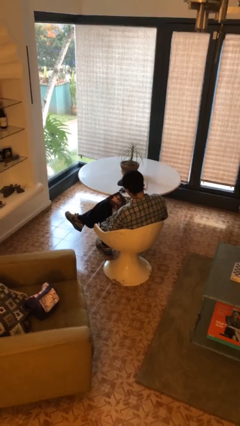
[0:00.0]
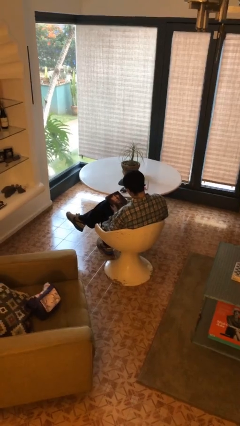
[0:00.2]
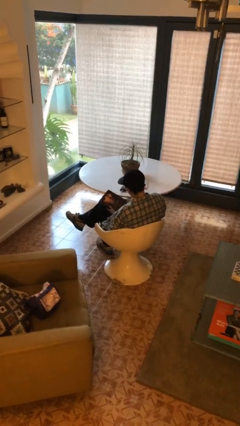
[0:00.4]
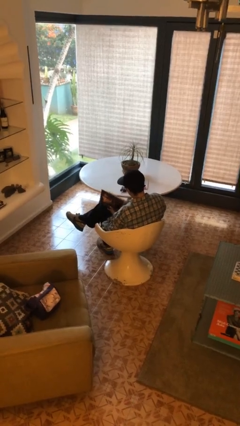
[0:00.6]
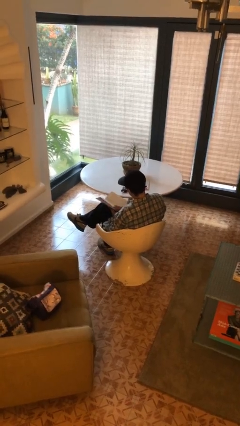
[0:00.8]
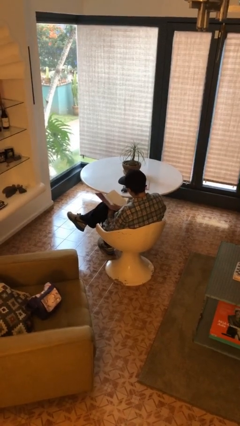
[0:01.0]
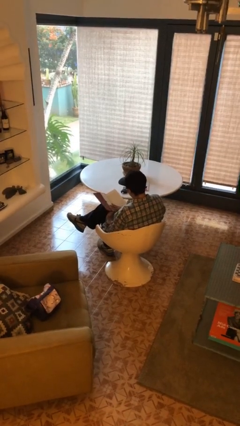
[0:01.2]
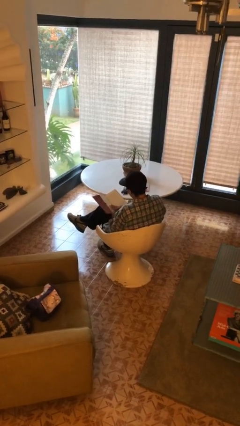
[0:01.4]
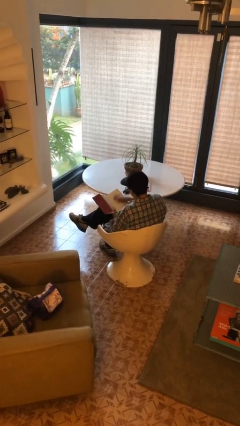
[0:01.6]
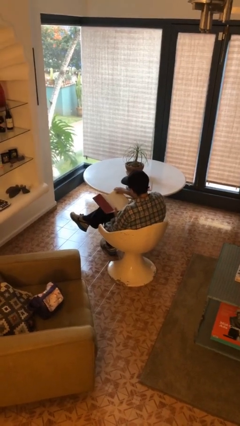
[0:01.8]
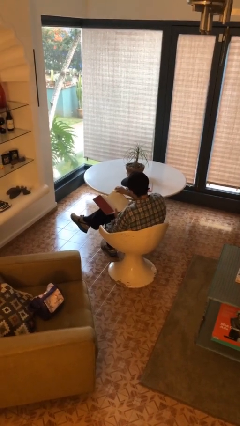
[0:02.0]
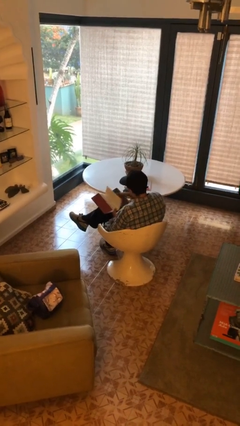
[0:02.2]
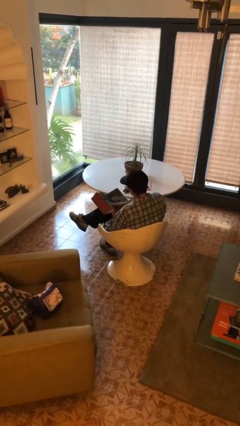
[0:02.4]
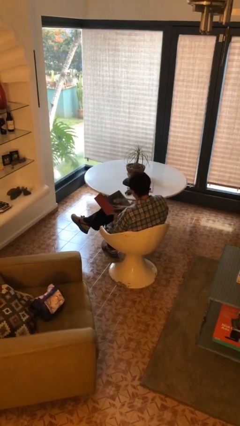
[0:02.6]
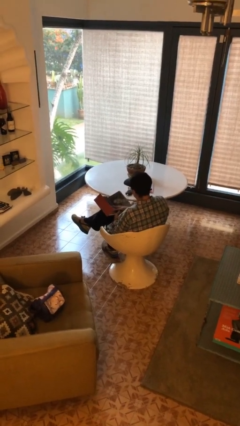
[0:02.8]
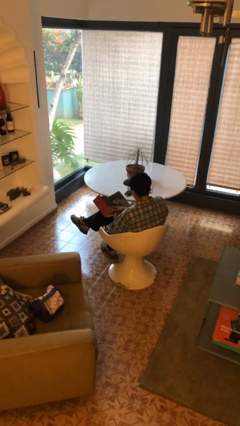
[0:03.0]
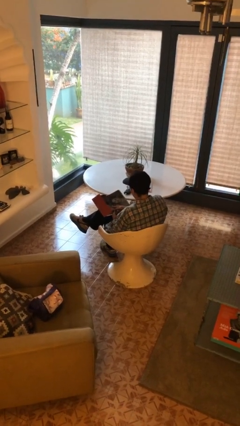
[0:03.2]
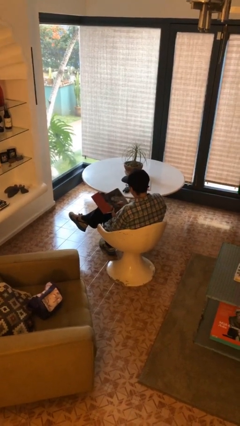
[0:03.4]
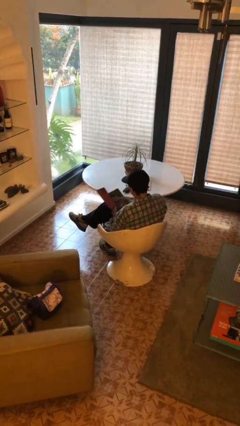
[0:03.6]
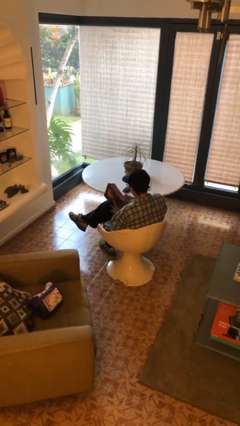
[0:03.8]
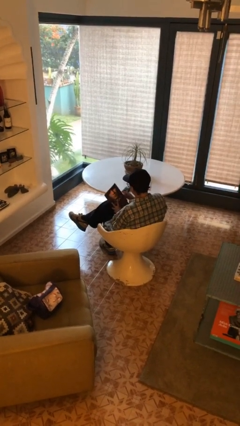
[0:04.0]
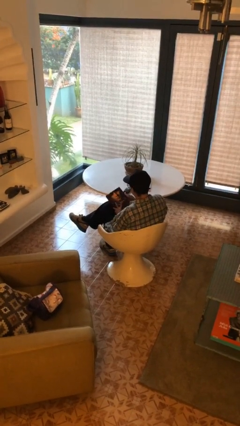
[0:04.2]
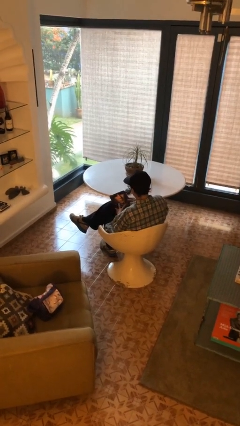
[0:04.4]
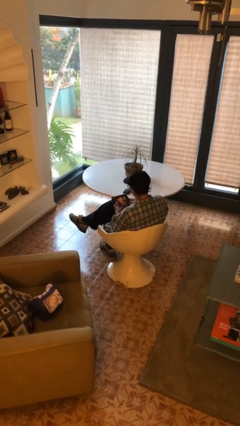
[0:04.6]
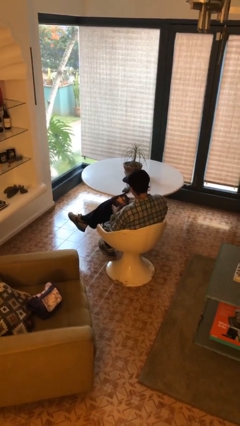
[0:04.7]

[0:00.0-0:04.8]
person reads book

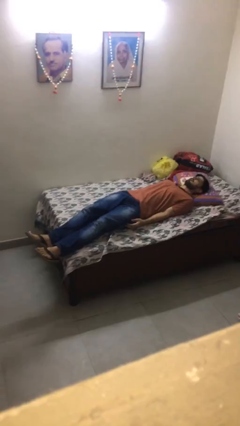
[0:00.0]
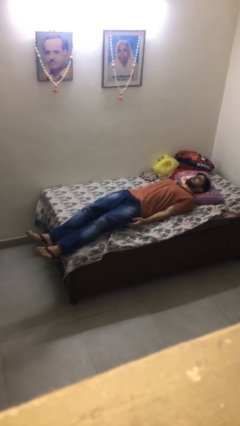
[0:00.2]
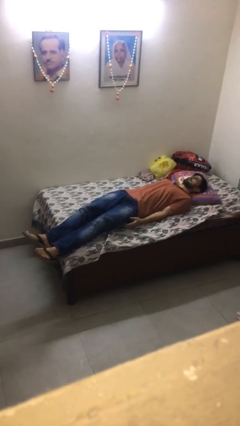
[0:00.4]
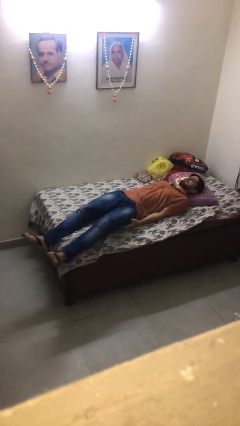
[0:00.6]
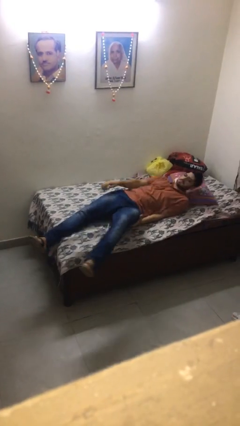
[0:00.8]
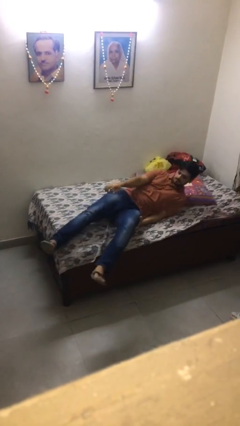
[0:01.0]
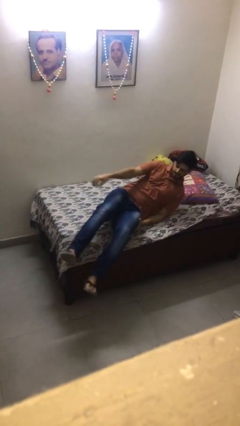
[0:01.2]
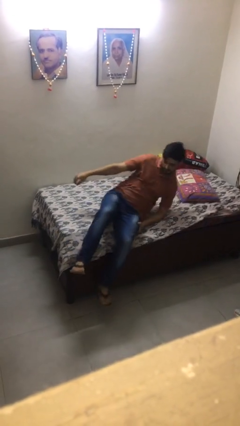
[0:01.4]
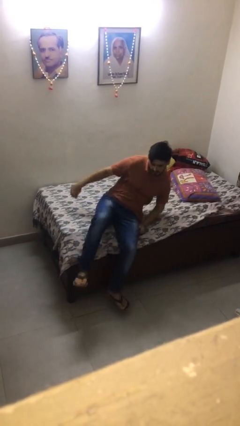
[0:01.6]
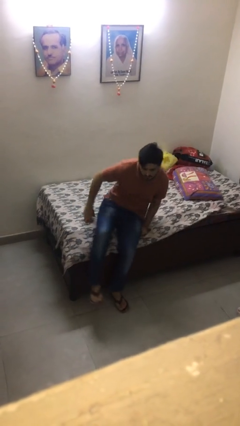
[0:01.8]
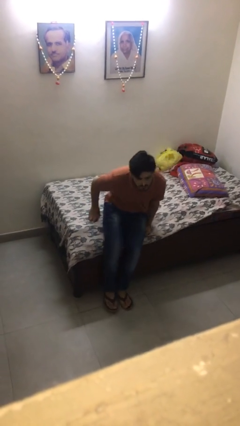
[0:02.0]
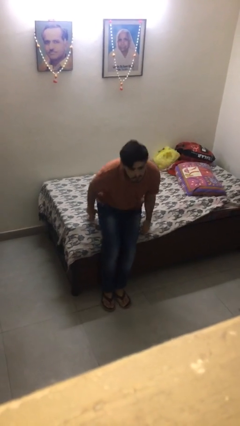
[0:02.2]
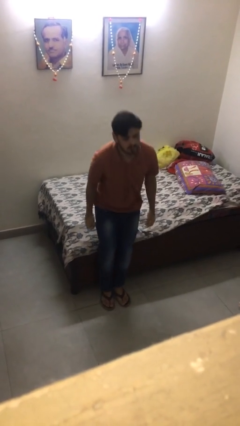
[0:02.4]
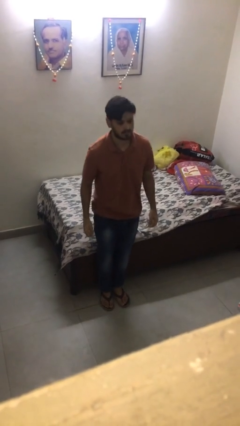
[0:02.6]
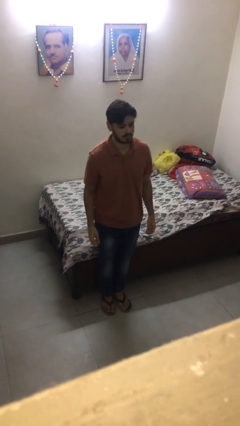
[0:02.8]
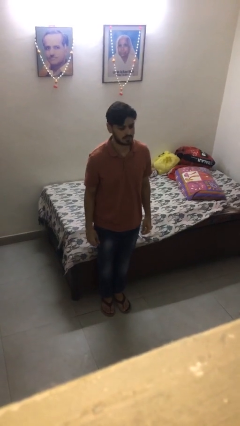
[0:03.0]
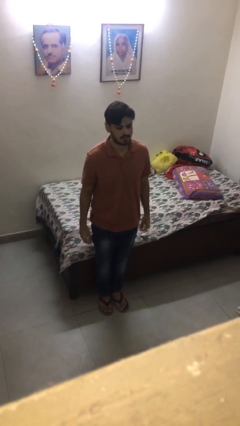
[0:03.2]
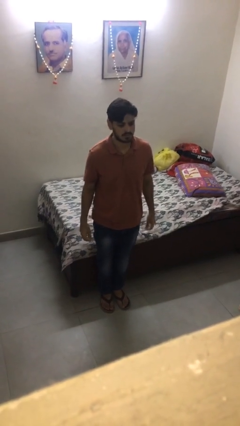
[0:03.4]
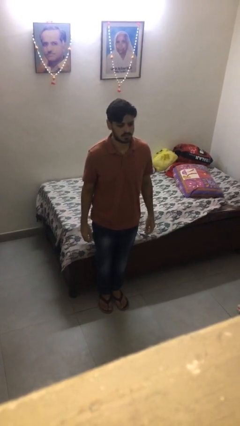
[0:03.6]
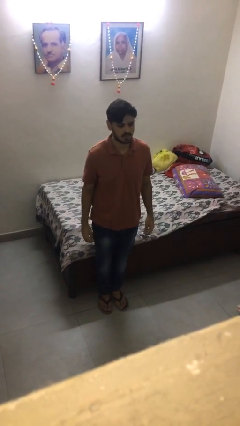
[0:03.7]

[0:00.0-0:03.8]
person stands up

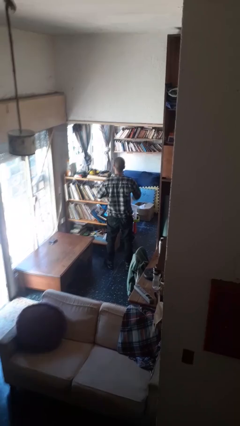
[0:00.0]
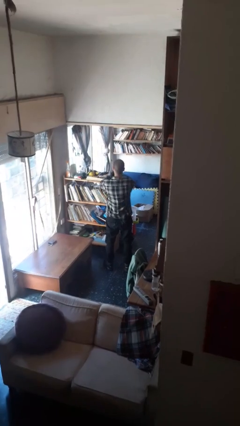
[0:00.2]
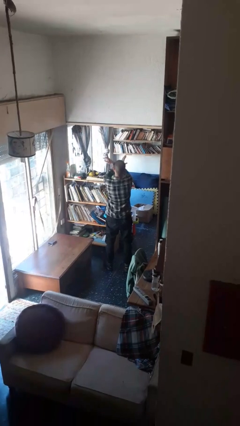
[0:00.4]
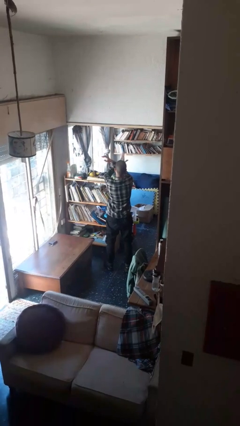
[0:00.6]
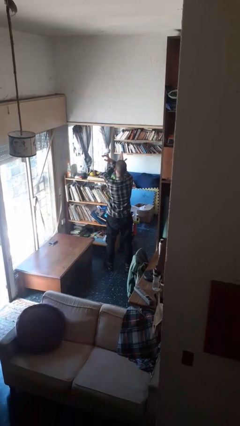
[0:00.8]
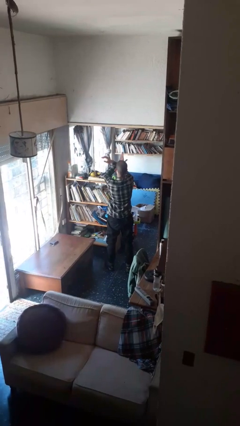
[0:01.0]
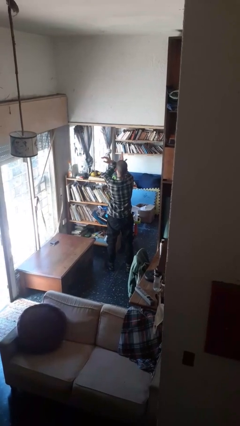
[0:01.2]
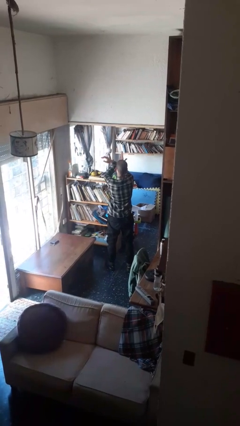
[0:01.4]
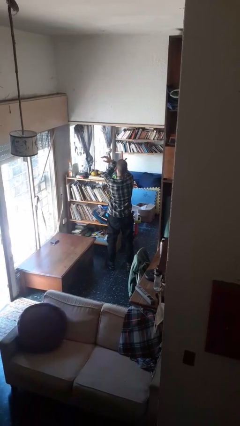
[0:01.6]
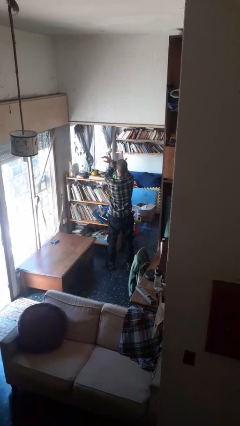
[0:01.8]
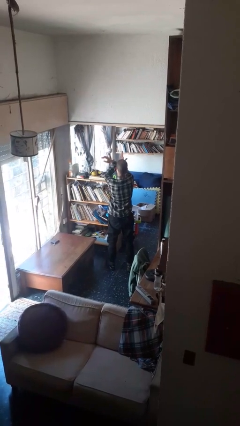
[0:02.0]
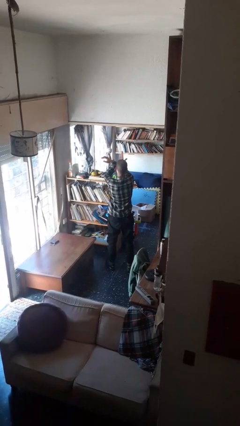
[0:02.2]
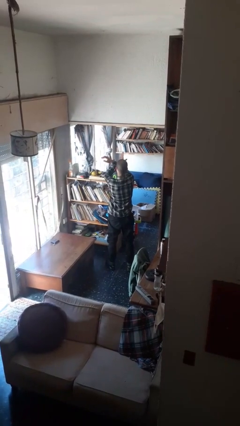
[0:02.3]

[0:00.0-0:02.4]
person gestures arms x

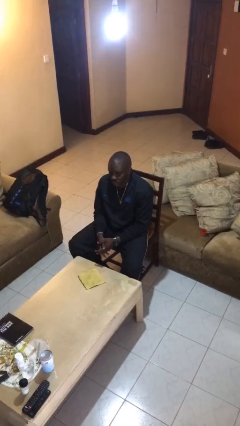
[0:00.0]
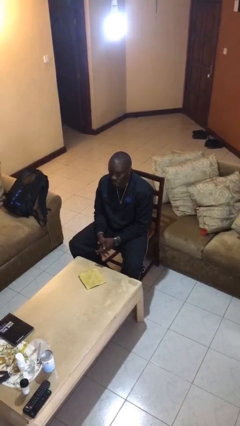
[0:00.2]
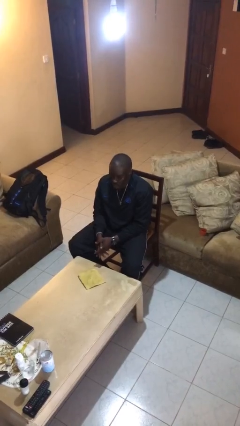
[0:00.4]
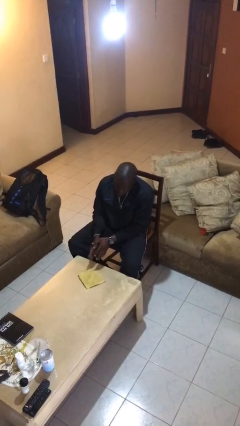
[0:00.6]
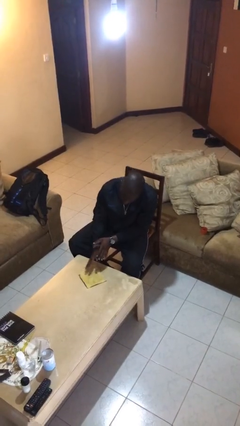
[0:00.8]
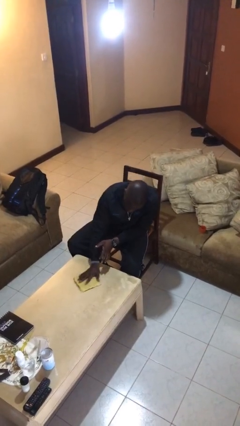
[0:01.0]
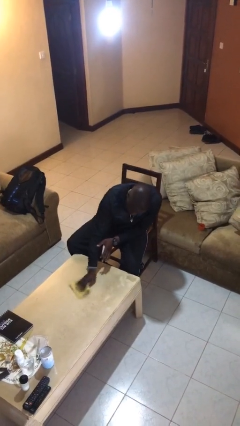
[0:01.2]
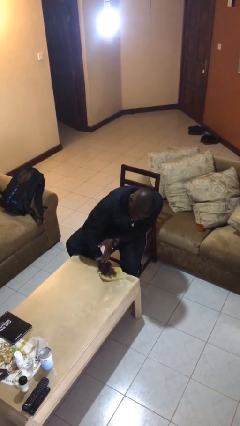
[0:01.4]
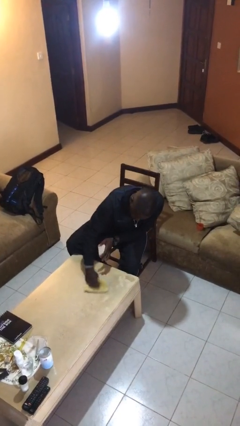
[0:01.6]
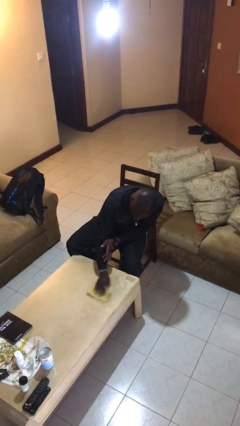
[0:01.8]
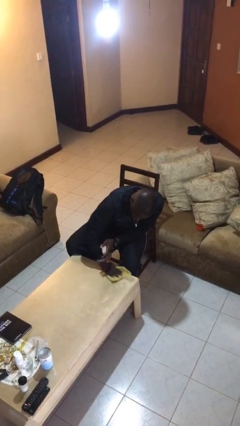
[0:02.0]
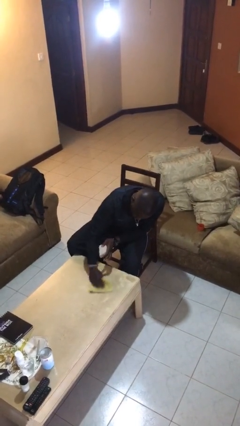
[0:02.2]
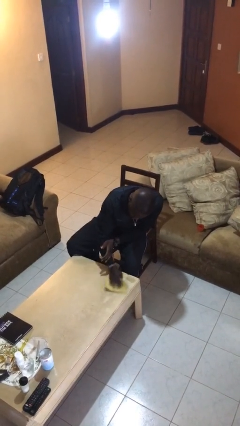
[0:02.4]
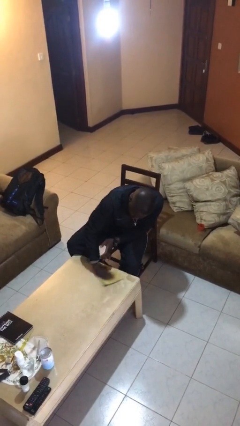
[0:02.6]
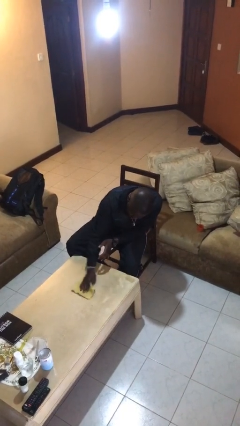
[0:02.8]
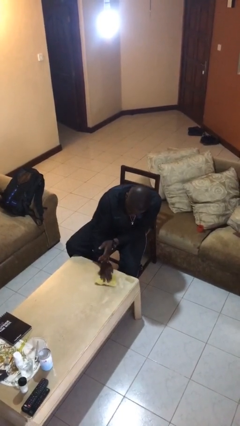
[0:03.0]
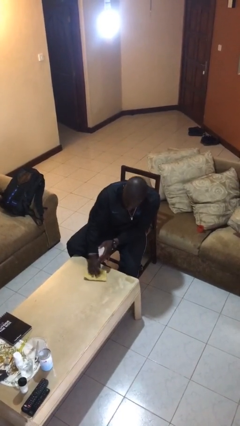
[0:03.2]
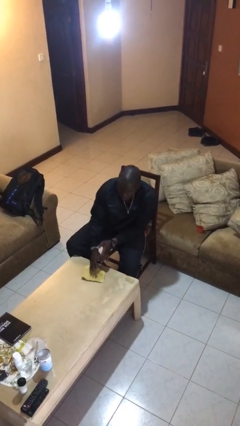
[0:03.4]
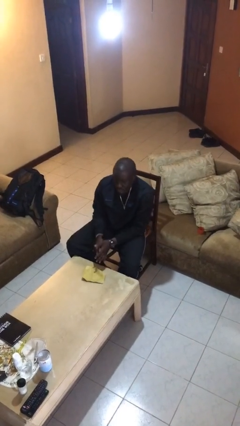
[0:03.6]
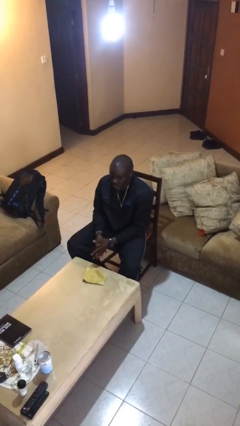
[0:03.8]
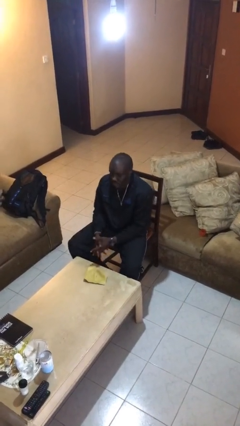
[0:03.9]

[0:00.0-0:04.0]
person cleans table with rag

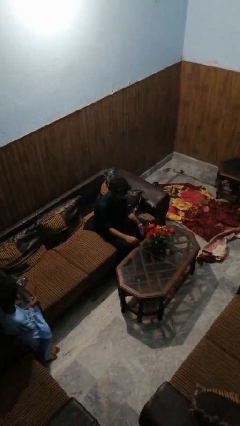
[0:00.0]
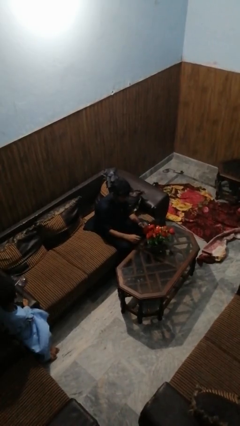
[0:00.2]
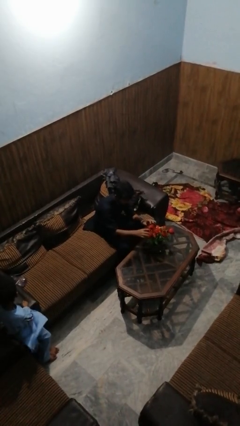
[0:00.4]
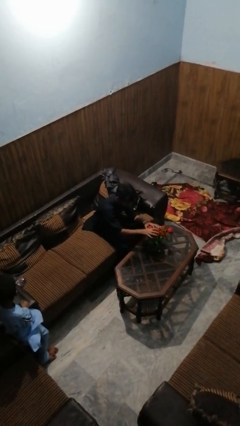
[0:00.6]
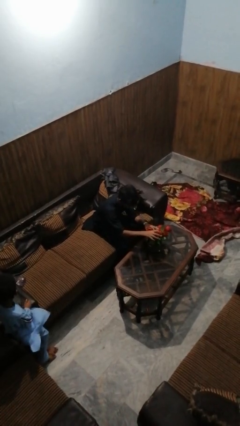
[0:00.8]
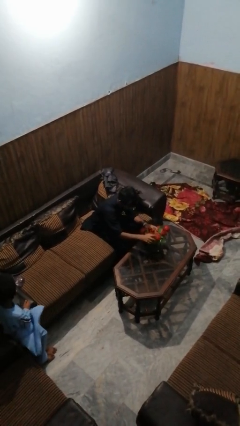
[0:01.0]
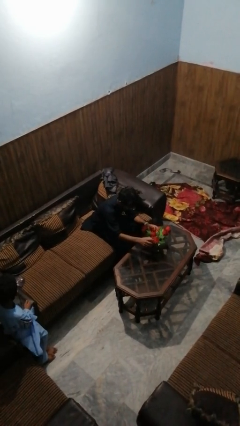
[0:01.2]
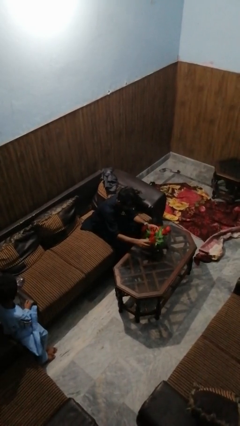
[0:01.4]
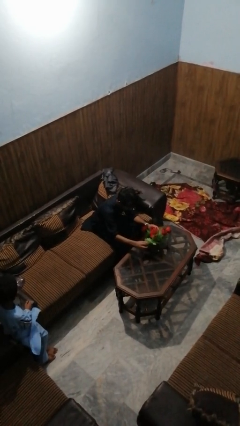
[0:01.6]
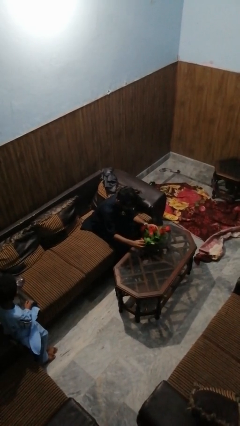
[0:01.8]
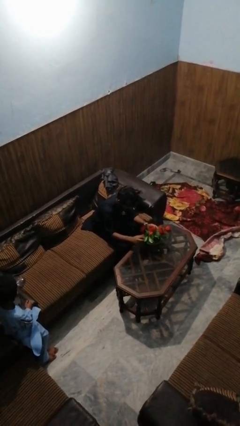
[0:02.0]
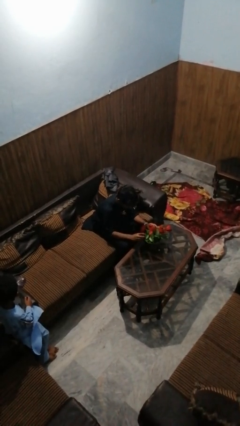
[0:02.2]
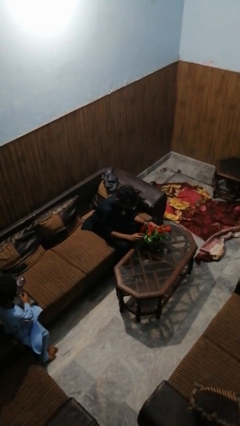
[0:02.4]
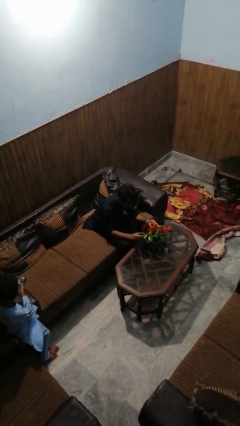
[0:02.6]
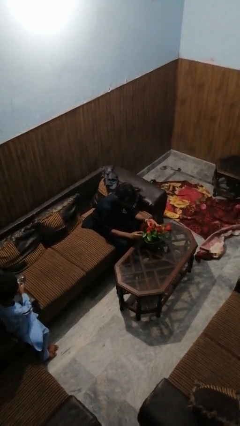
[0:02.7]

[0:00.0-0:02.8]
person arranges flowers in vase
